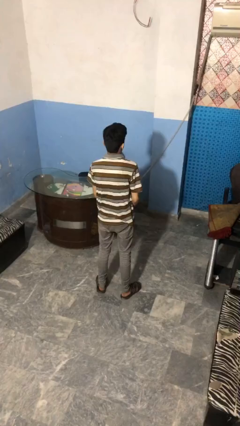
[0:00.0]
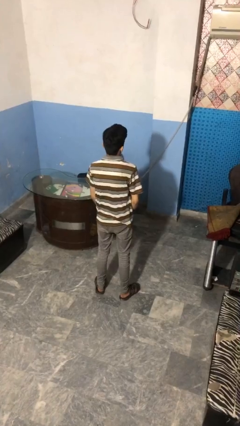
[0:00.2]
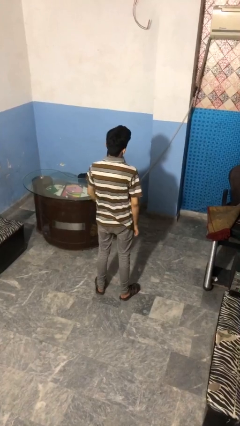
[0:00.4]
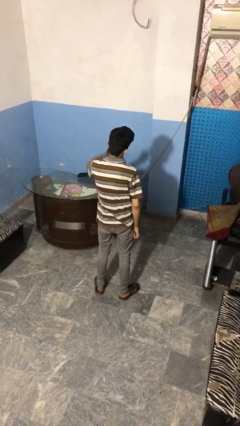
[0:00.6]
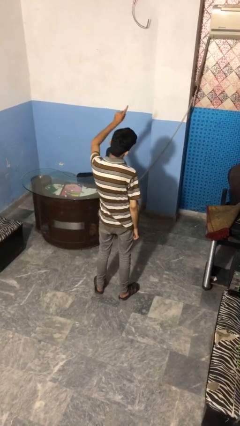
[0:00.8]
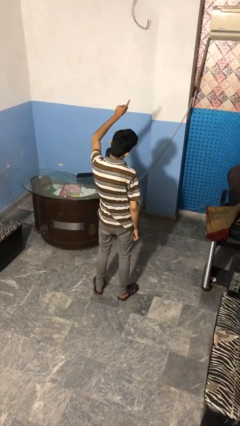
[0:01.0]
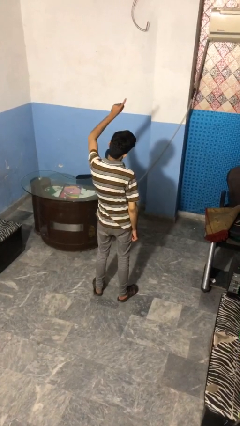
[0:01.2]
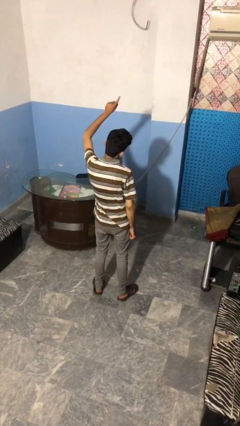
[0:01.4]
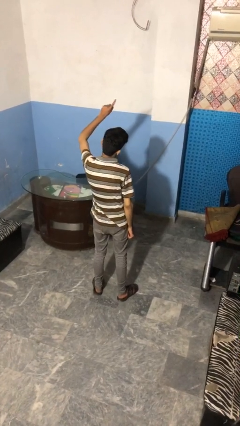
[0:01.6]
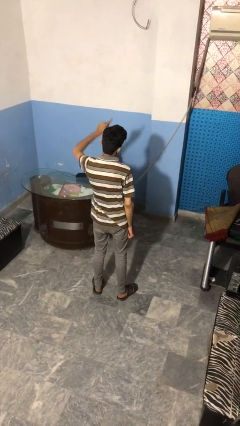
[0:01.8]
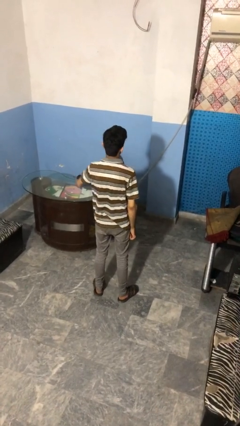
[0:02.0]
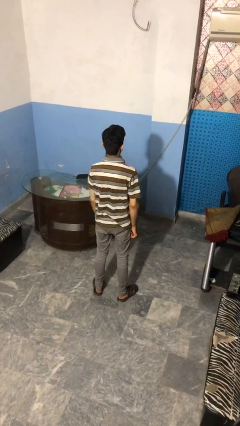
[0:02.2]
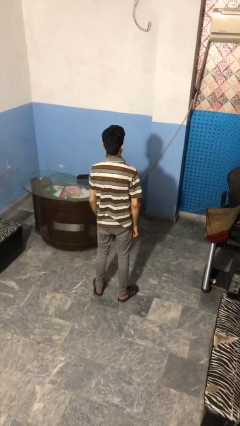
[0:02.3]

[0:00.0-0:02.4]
person gestures number one

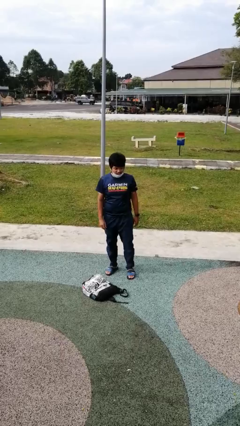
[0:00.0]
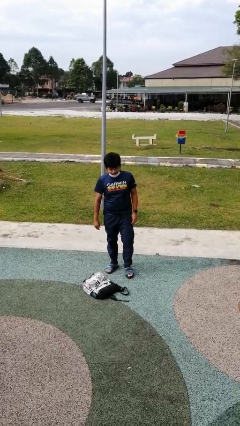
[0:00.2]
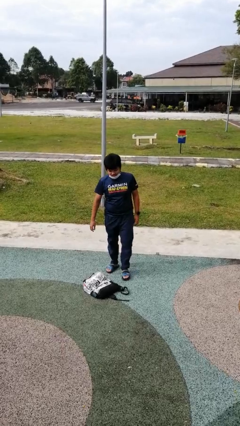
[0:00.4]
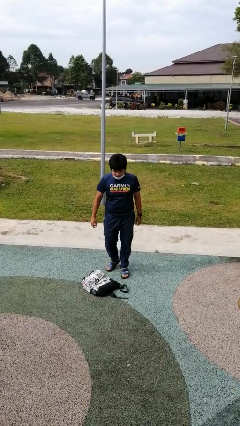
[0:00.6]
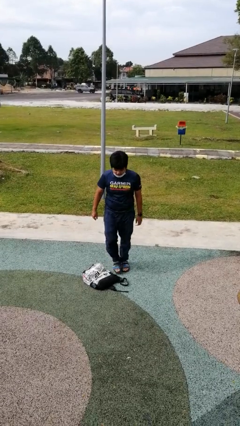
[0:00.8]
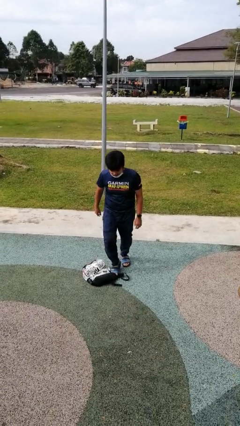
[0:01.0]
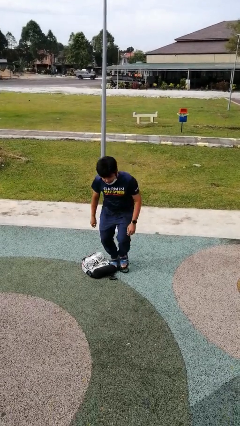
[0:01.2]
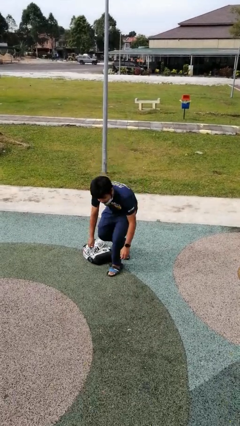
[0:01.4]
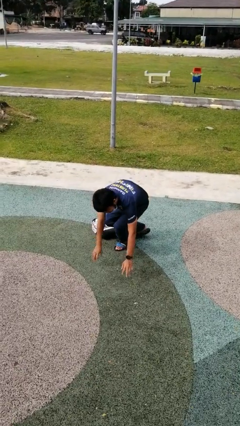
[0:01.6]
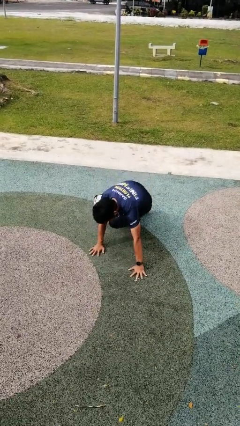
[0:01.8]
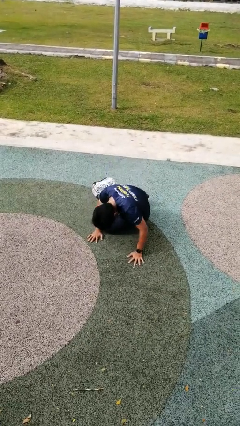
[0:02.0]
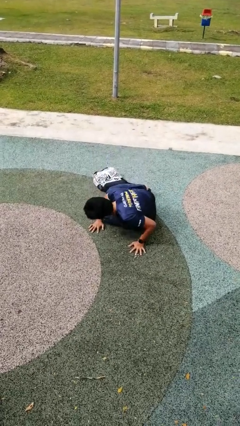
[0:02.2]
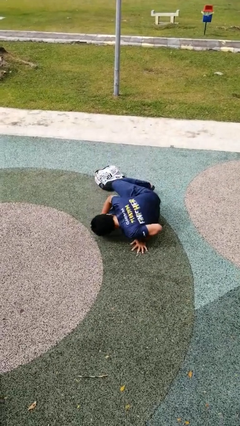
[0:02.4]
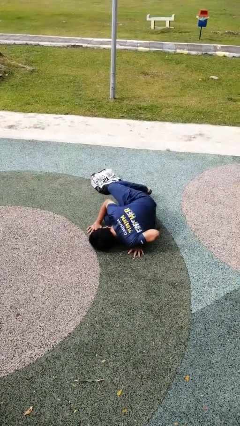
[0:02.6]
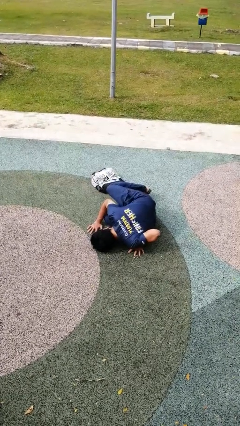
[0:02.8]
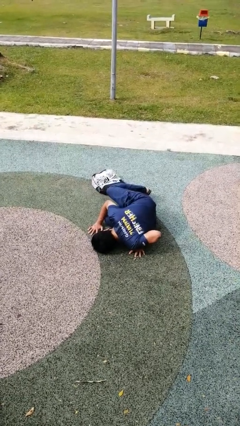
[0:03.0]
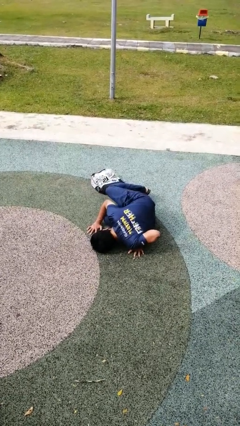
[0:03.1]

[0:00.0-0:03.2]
person trips on object on floor

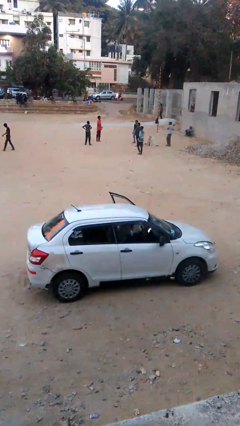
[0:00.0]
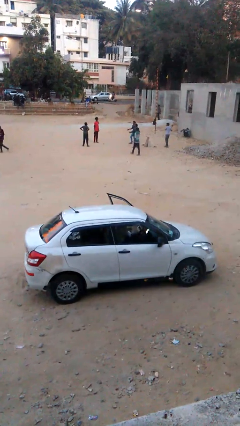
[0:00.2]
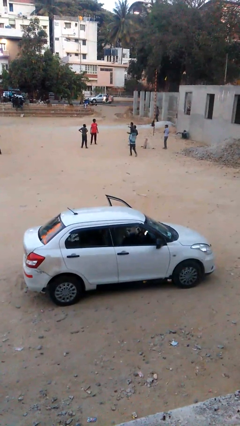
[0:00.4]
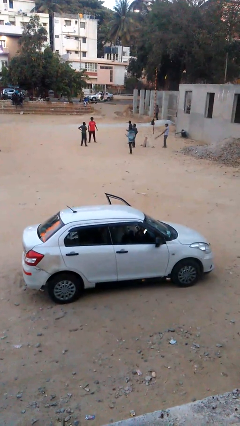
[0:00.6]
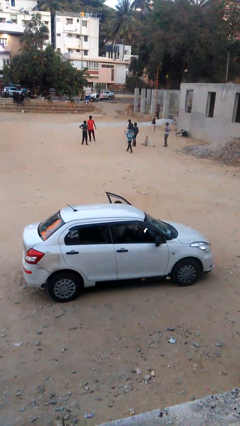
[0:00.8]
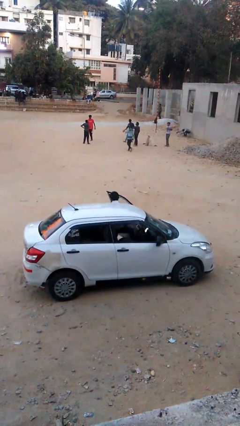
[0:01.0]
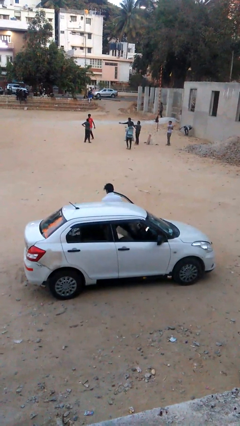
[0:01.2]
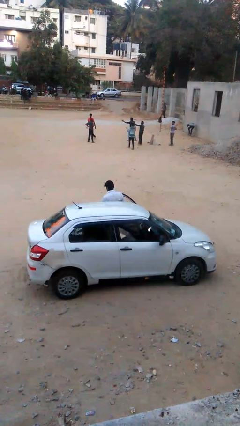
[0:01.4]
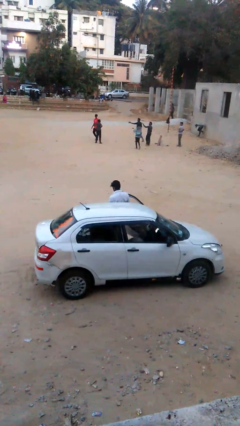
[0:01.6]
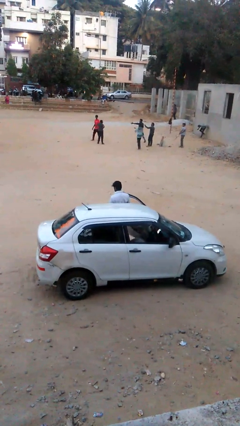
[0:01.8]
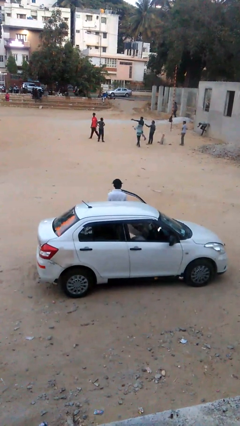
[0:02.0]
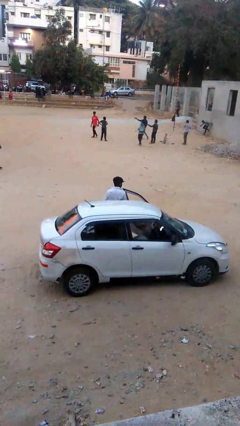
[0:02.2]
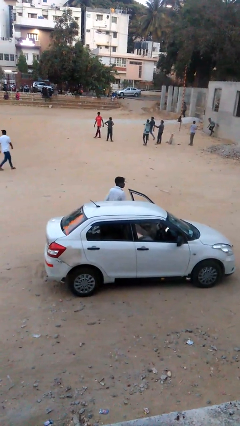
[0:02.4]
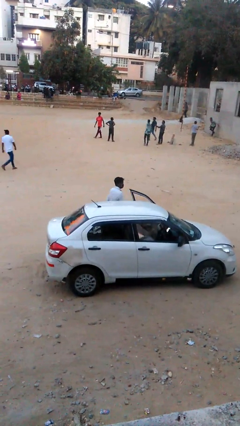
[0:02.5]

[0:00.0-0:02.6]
person exits car

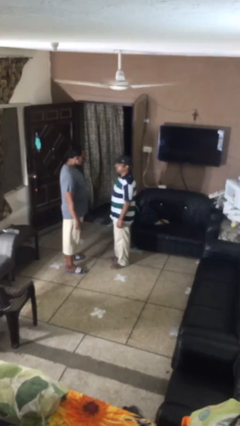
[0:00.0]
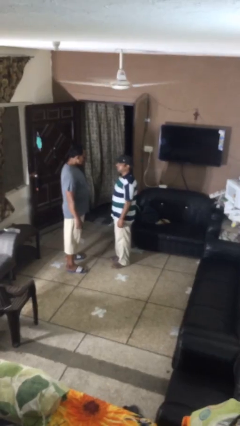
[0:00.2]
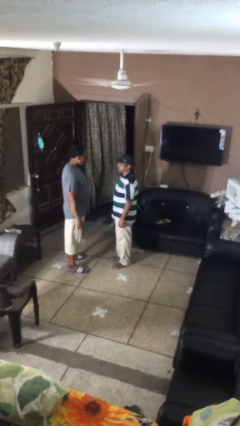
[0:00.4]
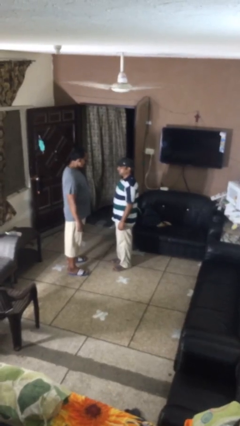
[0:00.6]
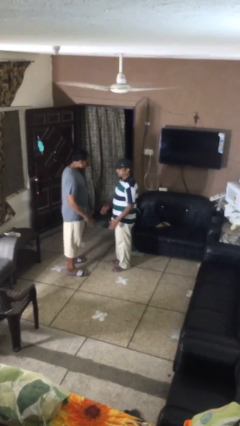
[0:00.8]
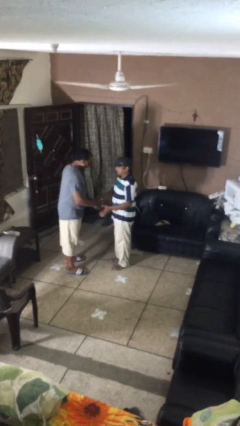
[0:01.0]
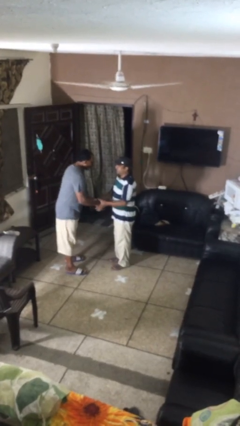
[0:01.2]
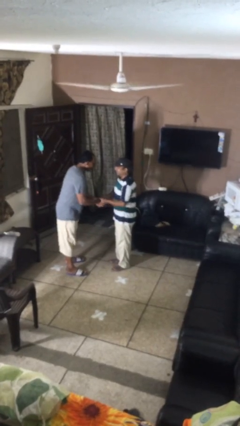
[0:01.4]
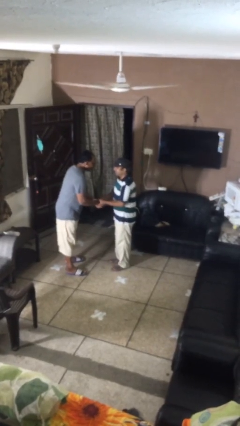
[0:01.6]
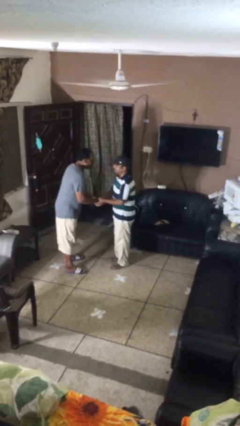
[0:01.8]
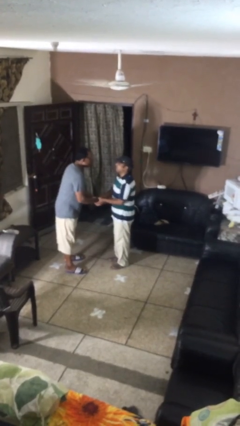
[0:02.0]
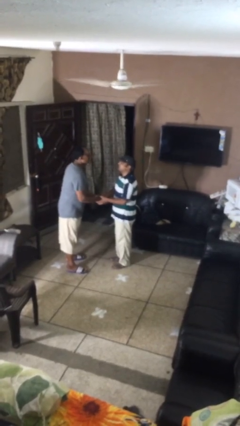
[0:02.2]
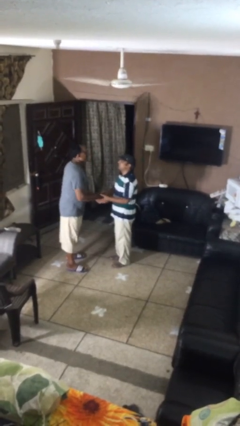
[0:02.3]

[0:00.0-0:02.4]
person shakes hand

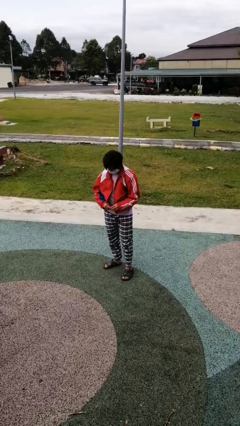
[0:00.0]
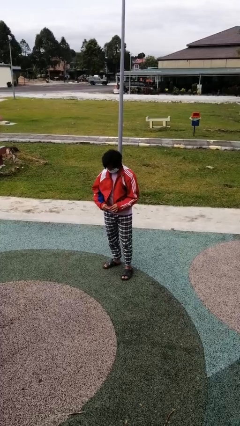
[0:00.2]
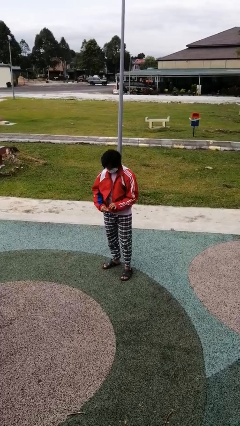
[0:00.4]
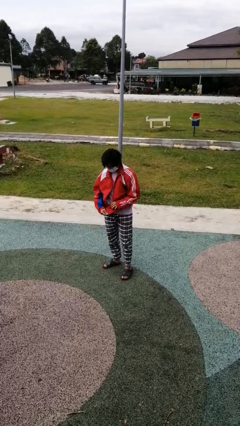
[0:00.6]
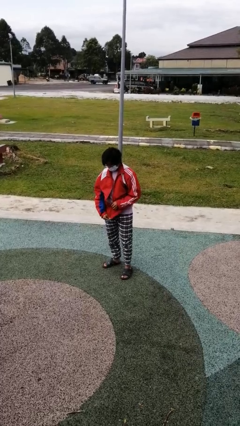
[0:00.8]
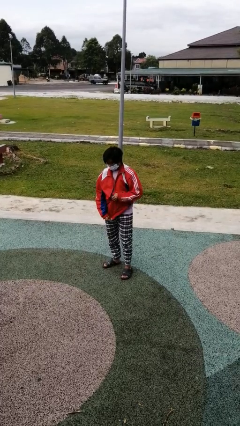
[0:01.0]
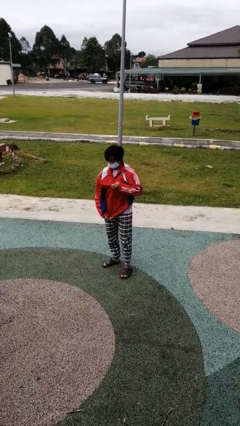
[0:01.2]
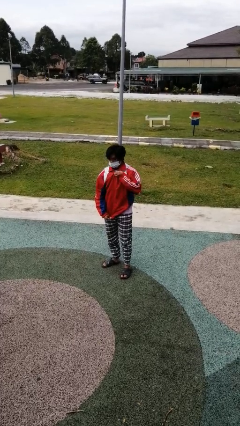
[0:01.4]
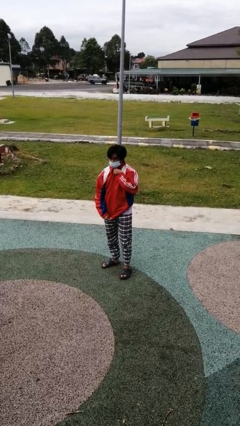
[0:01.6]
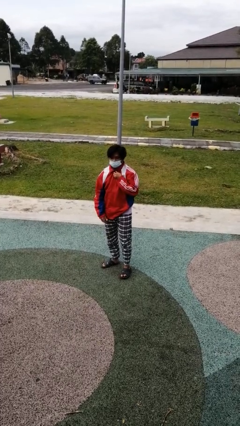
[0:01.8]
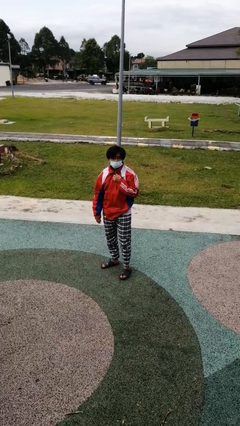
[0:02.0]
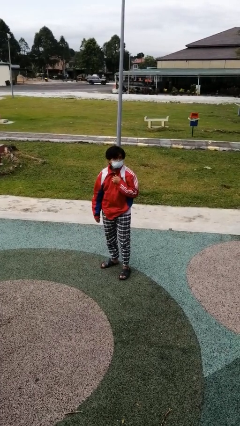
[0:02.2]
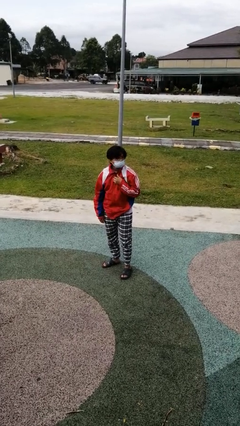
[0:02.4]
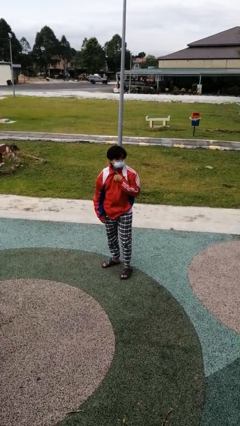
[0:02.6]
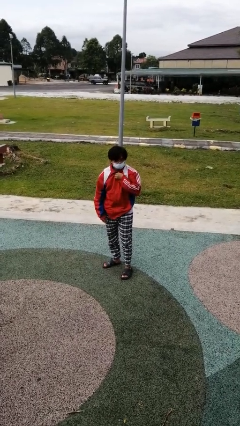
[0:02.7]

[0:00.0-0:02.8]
person zips up jacket

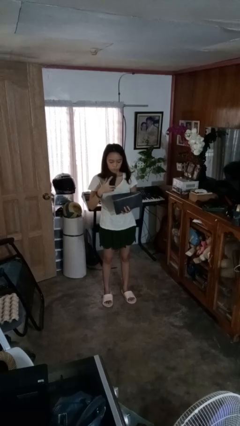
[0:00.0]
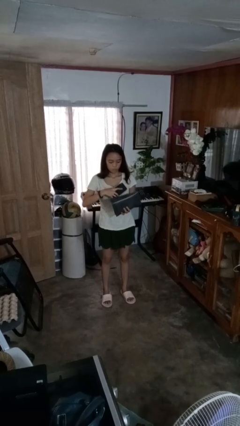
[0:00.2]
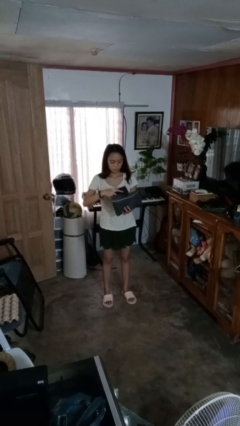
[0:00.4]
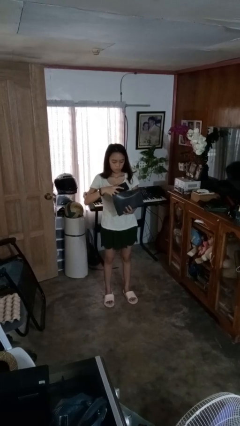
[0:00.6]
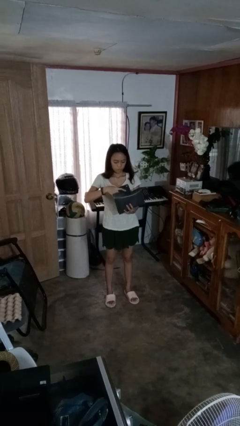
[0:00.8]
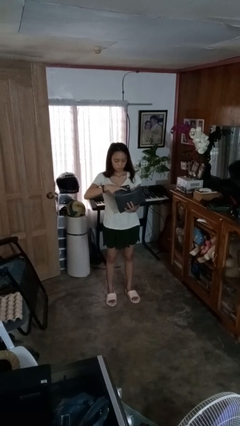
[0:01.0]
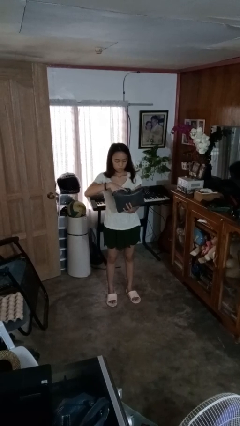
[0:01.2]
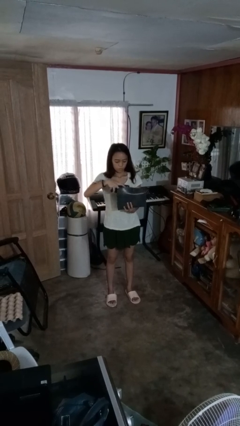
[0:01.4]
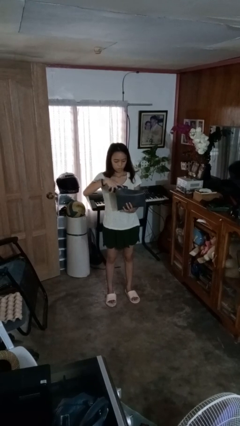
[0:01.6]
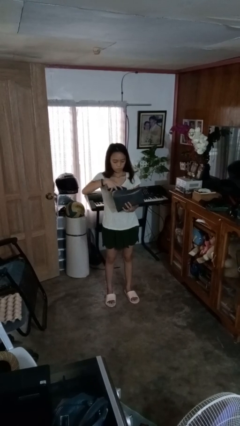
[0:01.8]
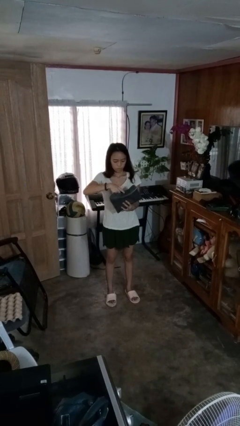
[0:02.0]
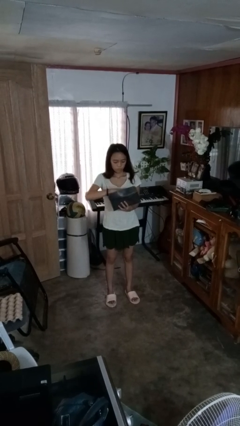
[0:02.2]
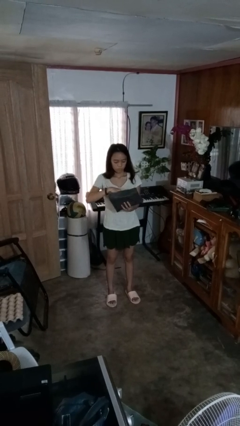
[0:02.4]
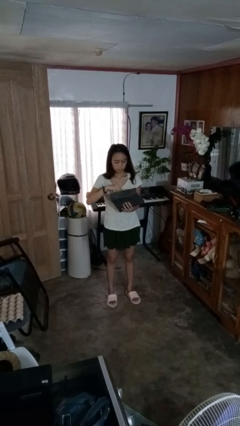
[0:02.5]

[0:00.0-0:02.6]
person puts object into purse

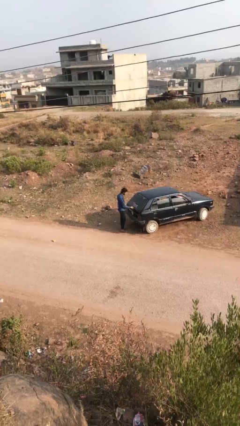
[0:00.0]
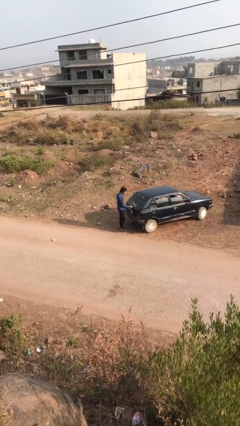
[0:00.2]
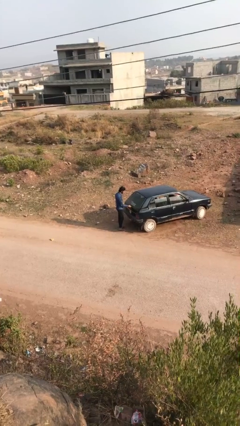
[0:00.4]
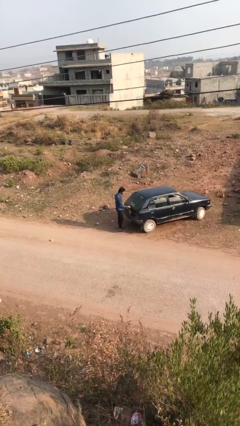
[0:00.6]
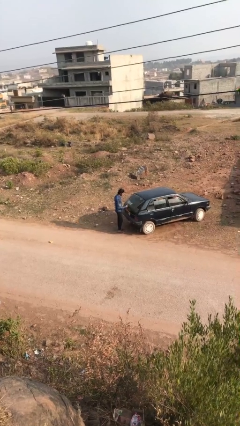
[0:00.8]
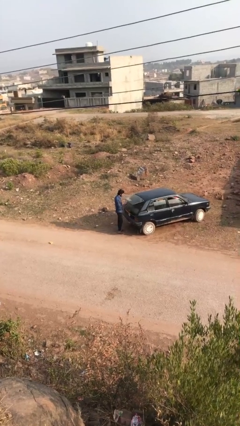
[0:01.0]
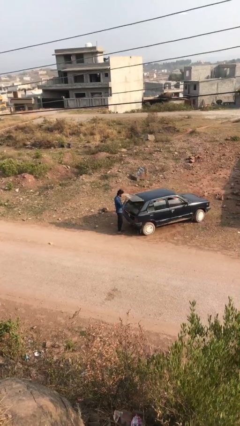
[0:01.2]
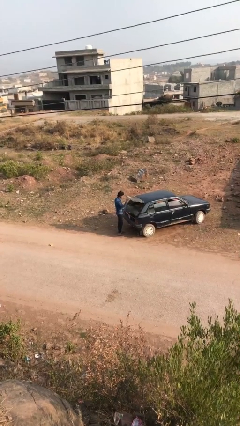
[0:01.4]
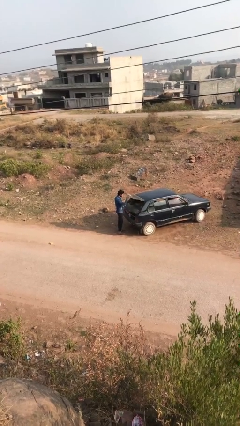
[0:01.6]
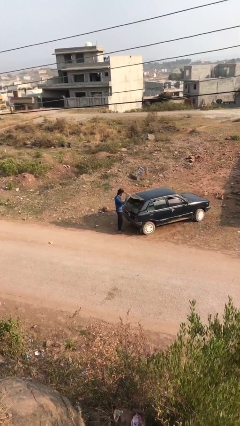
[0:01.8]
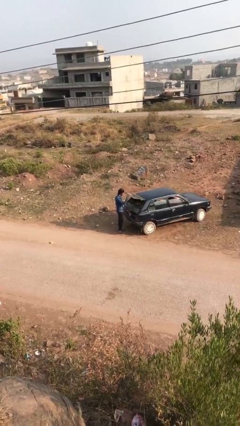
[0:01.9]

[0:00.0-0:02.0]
person opens car trunk
